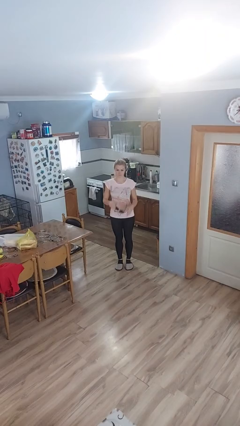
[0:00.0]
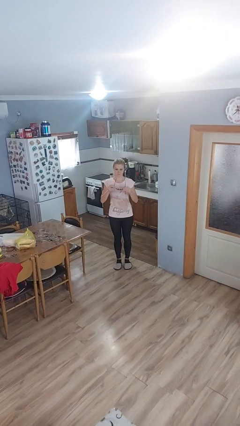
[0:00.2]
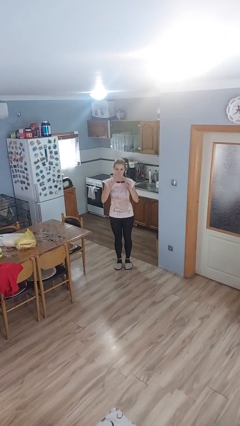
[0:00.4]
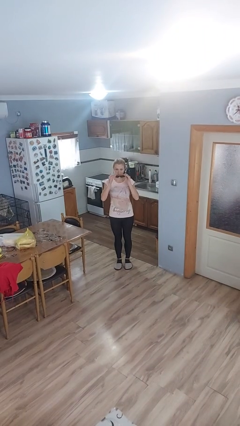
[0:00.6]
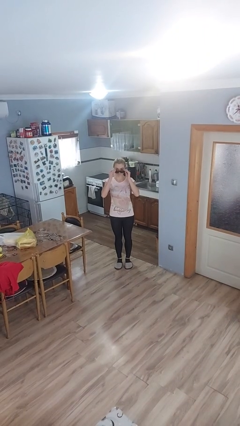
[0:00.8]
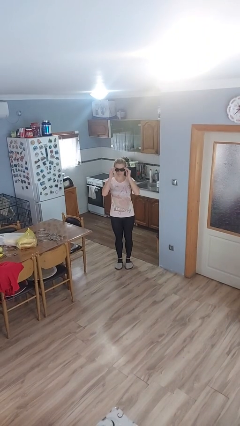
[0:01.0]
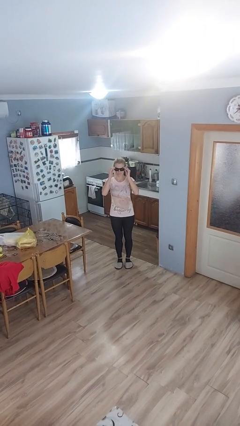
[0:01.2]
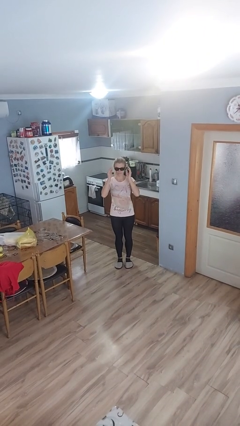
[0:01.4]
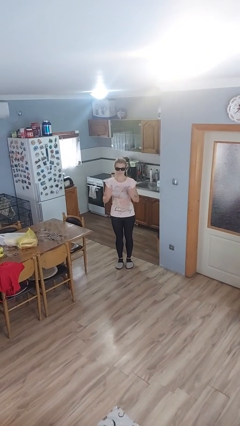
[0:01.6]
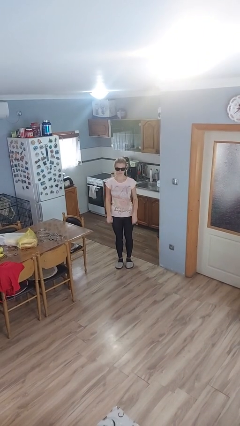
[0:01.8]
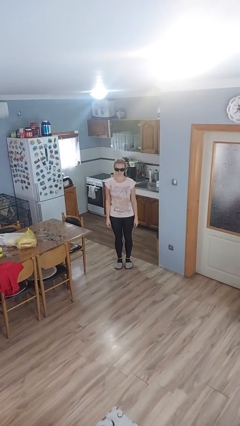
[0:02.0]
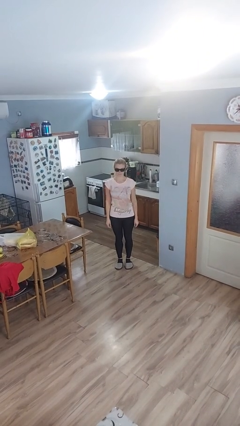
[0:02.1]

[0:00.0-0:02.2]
person puts on sunglasses

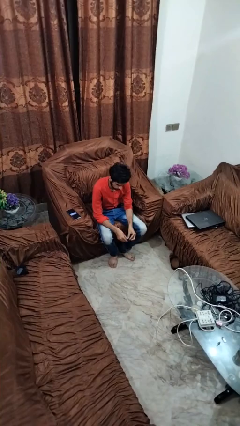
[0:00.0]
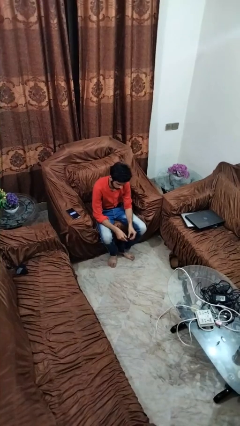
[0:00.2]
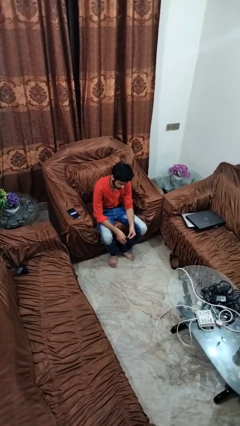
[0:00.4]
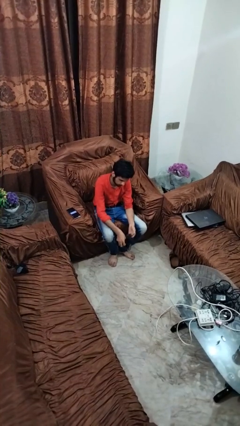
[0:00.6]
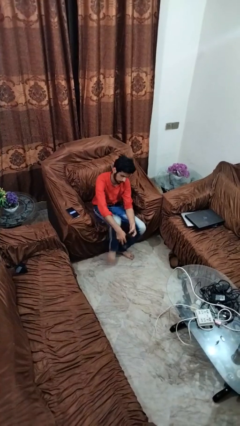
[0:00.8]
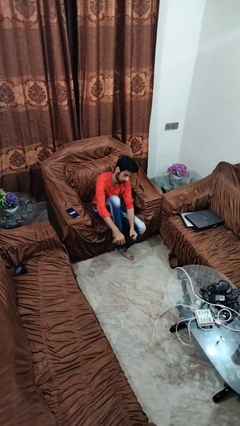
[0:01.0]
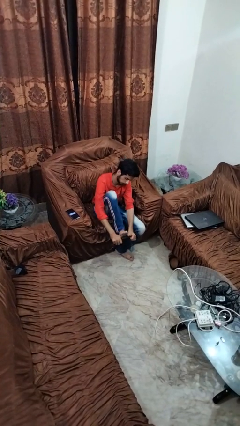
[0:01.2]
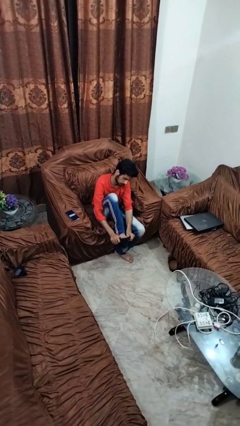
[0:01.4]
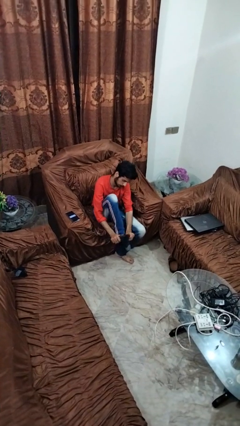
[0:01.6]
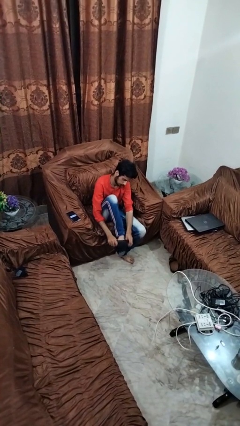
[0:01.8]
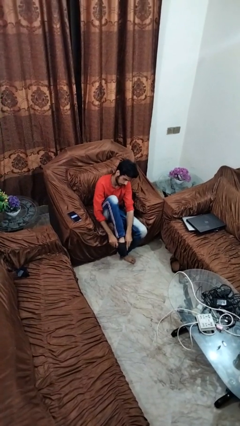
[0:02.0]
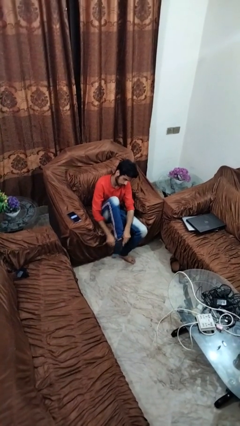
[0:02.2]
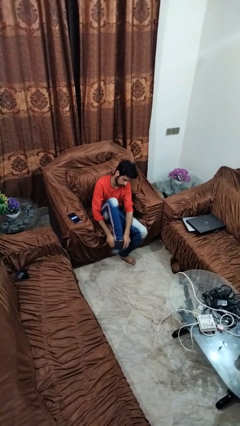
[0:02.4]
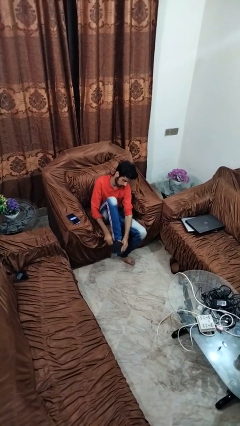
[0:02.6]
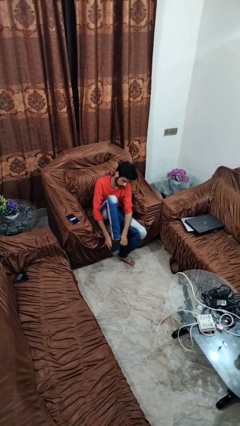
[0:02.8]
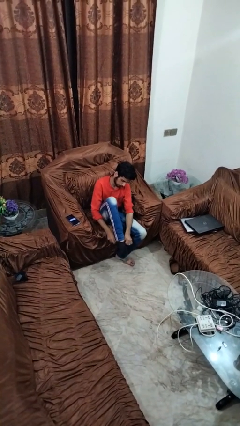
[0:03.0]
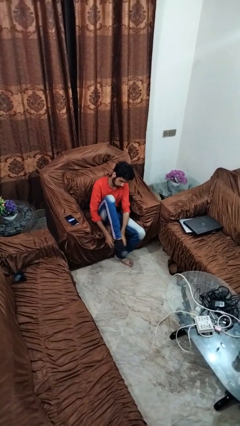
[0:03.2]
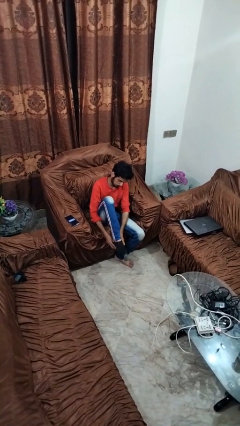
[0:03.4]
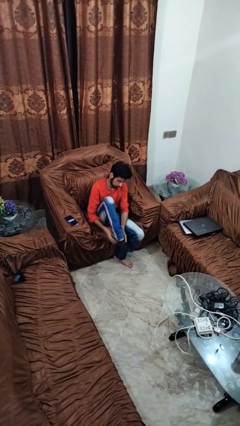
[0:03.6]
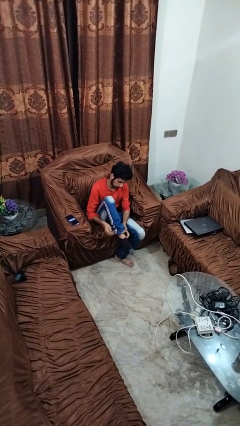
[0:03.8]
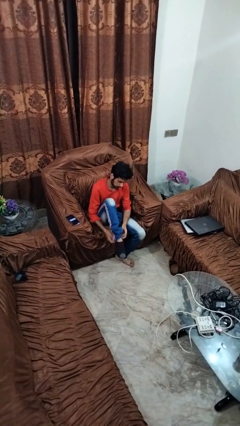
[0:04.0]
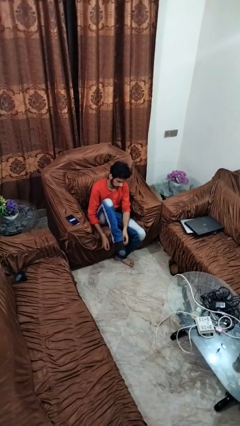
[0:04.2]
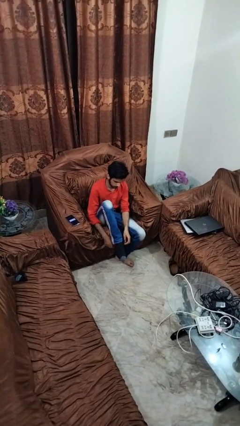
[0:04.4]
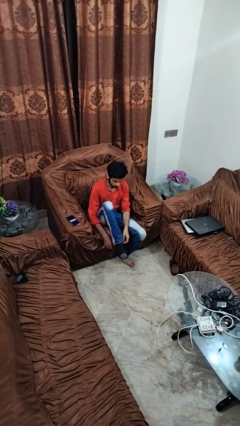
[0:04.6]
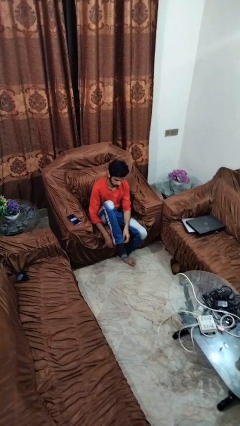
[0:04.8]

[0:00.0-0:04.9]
person puts on socks

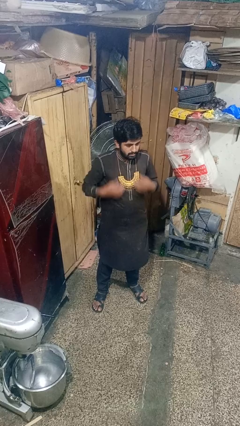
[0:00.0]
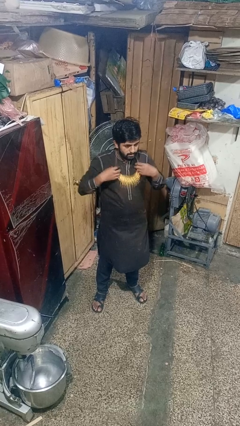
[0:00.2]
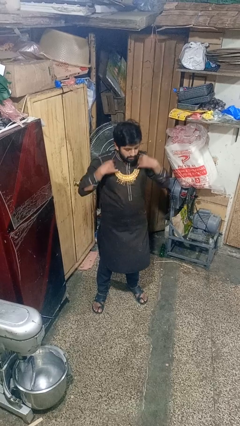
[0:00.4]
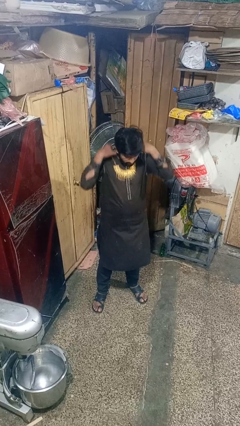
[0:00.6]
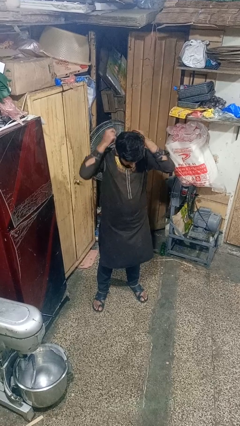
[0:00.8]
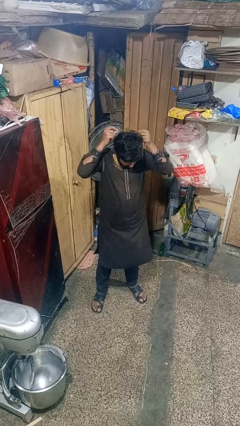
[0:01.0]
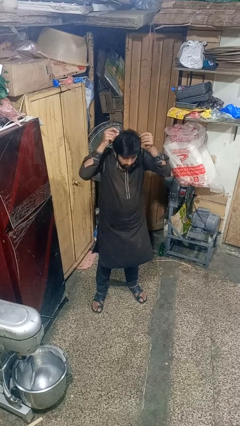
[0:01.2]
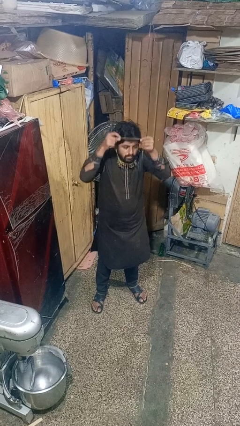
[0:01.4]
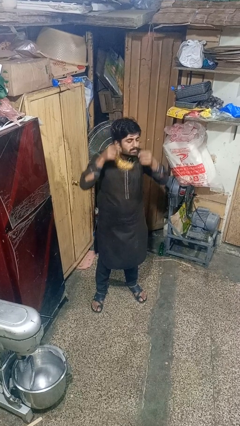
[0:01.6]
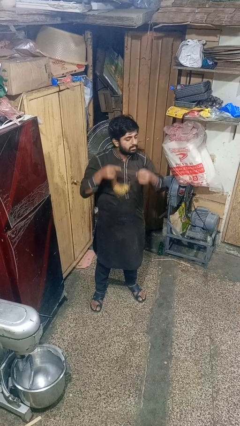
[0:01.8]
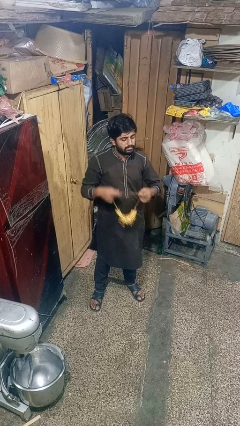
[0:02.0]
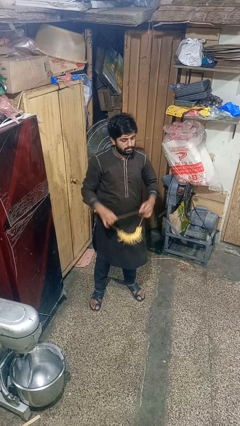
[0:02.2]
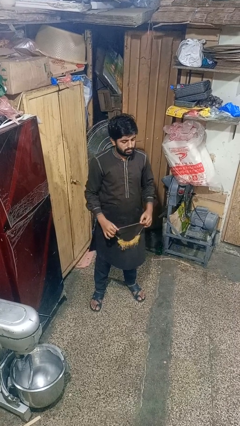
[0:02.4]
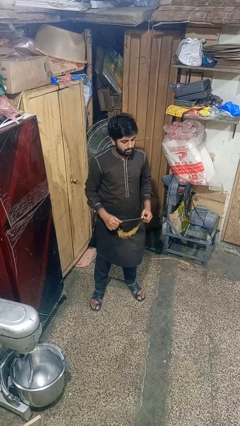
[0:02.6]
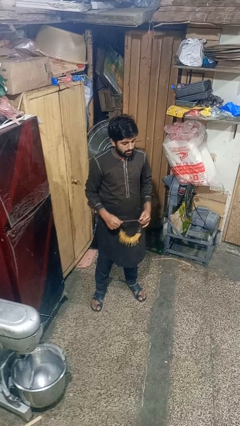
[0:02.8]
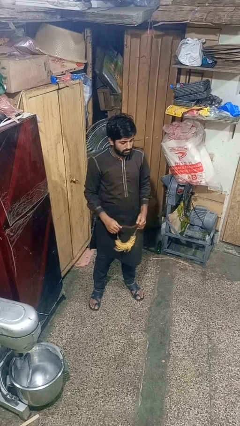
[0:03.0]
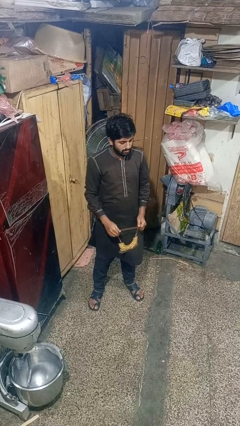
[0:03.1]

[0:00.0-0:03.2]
person takes off necklace

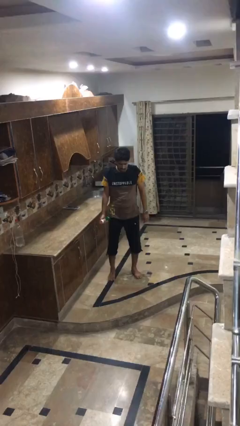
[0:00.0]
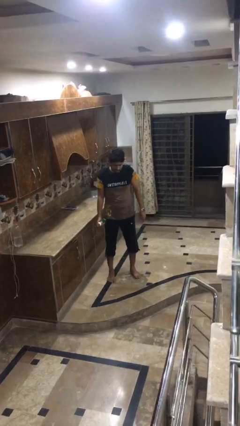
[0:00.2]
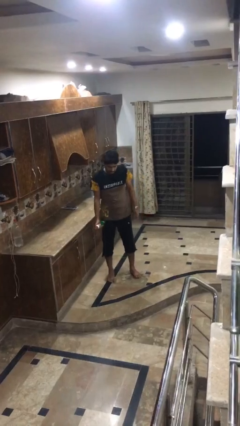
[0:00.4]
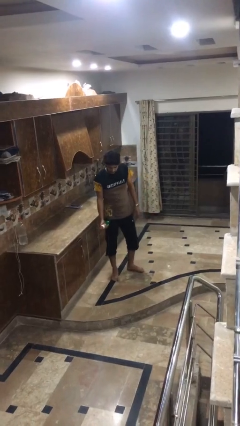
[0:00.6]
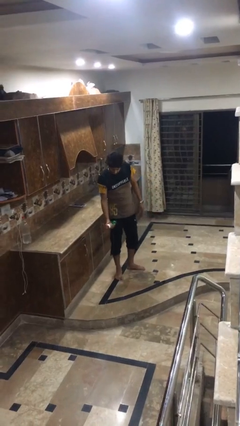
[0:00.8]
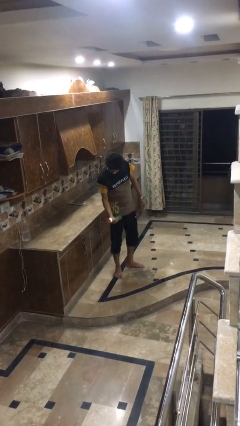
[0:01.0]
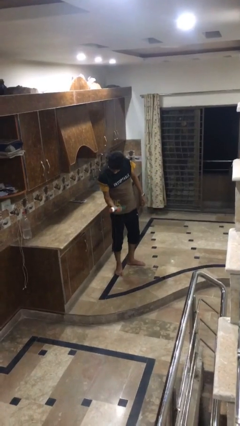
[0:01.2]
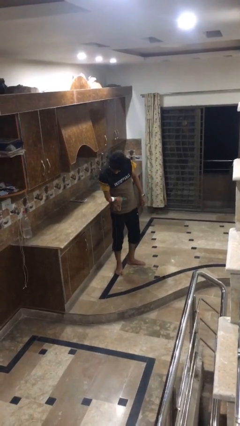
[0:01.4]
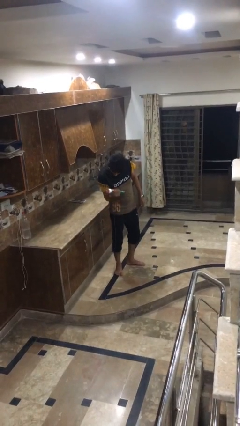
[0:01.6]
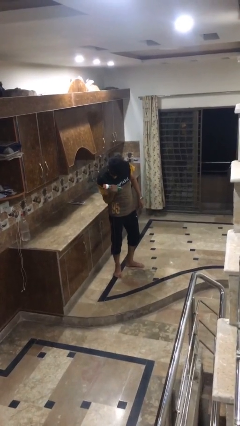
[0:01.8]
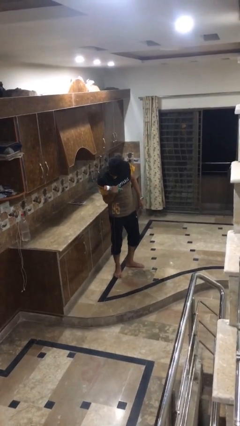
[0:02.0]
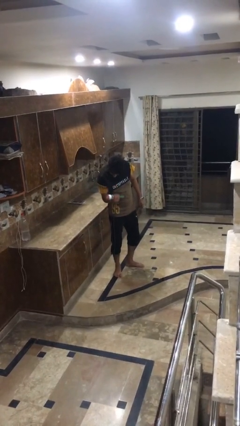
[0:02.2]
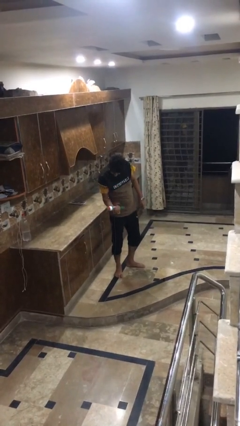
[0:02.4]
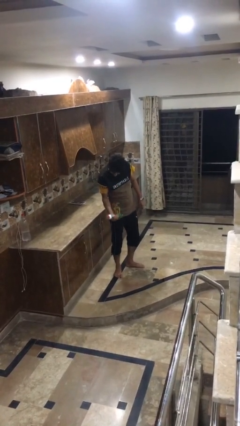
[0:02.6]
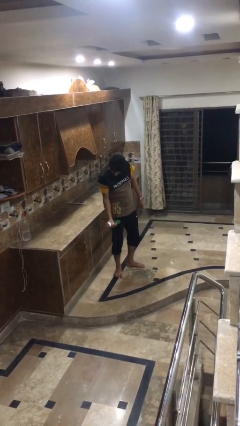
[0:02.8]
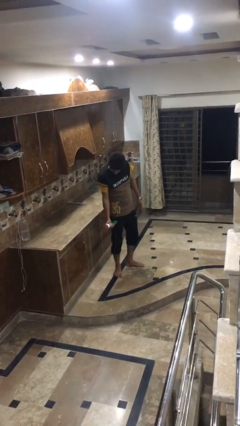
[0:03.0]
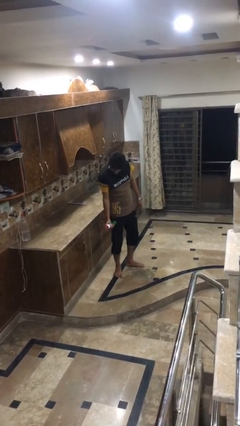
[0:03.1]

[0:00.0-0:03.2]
person lifts dumbbells

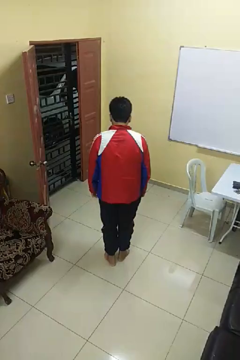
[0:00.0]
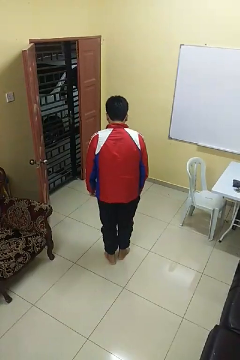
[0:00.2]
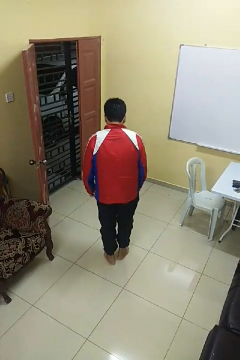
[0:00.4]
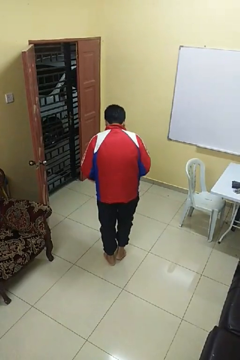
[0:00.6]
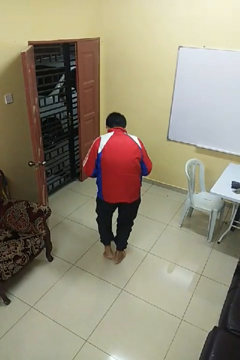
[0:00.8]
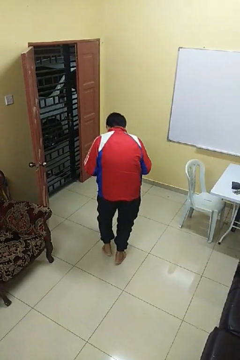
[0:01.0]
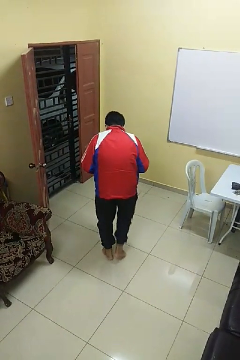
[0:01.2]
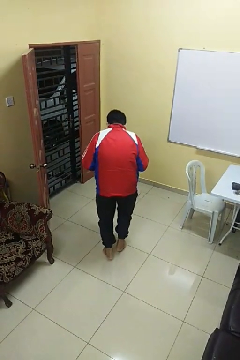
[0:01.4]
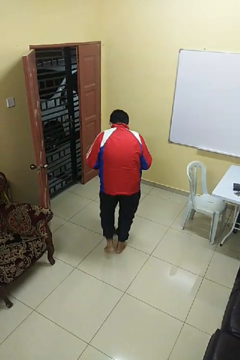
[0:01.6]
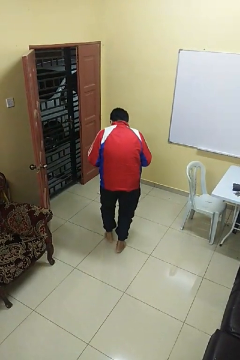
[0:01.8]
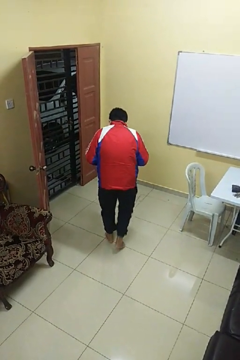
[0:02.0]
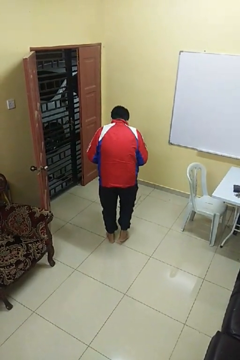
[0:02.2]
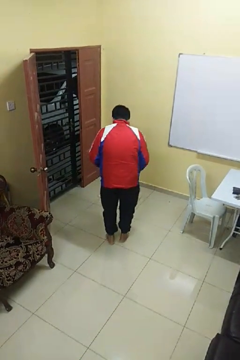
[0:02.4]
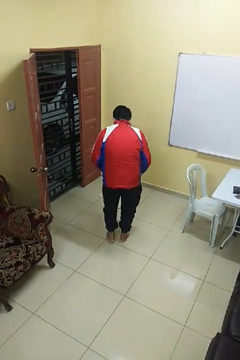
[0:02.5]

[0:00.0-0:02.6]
person walks tiptoe

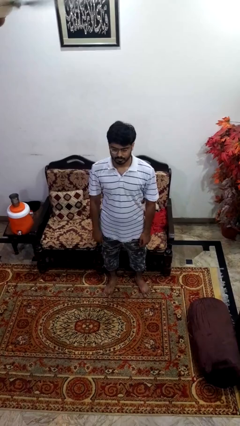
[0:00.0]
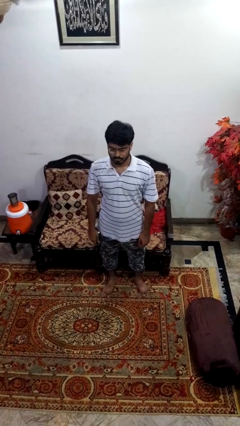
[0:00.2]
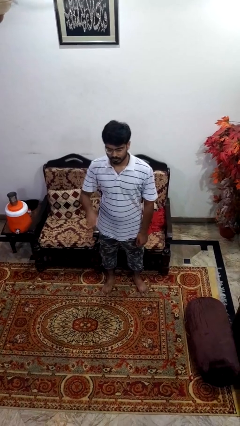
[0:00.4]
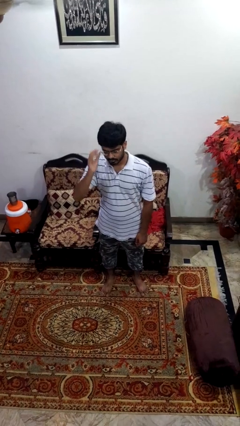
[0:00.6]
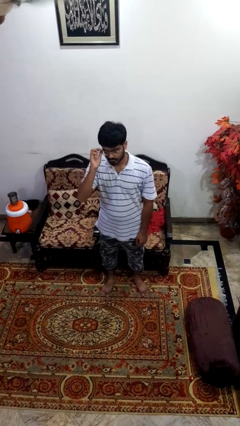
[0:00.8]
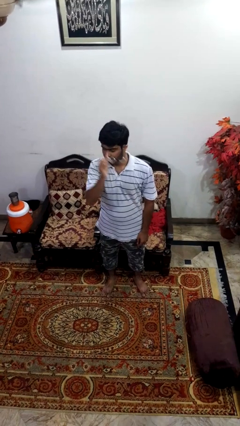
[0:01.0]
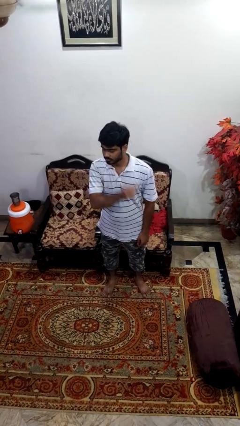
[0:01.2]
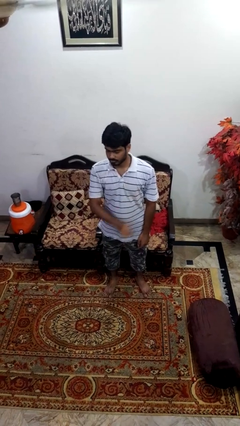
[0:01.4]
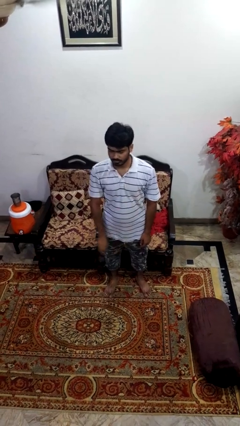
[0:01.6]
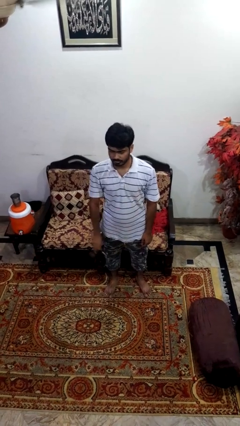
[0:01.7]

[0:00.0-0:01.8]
person takes off glasses

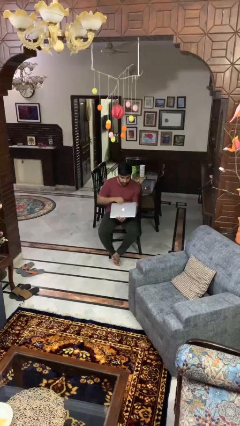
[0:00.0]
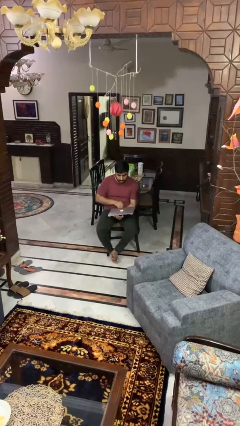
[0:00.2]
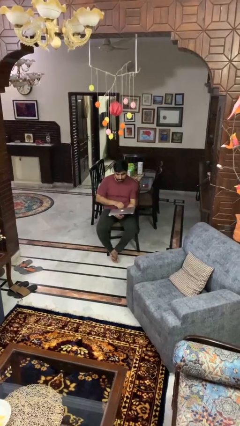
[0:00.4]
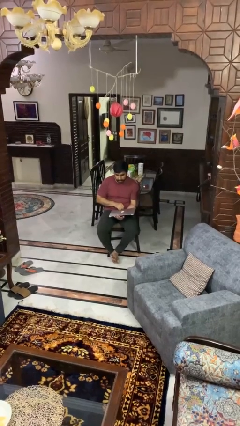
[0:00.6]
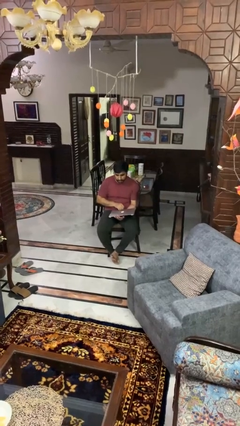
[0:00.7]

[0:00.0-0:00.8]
person closes laptop
